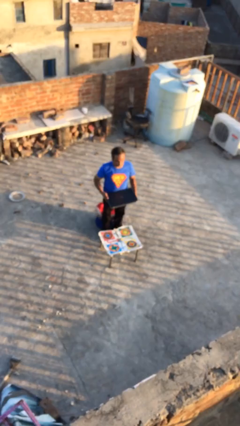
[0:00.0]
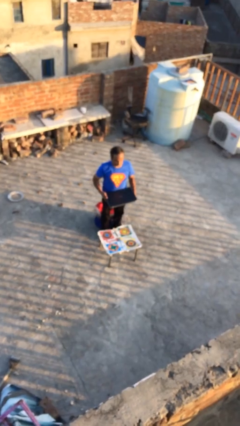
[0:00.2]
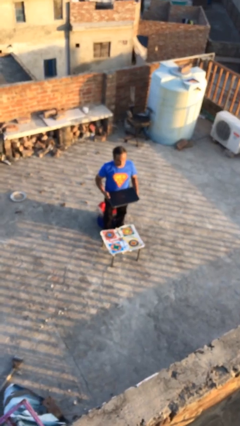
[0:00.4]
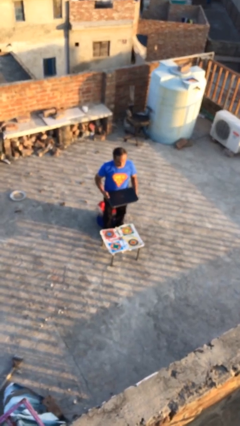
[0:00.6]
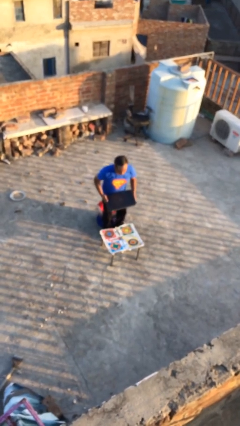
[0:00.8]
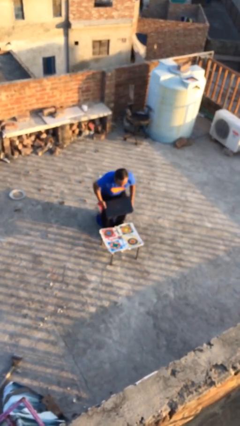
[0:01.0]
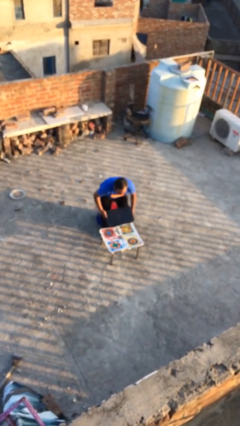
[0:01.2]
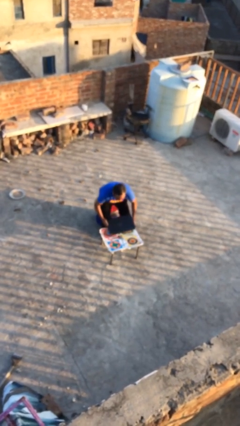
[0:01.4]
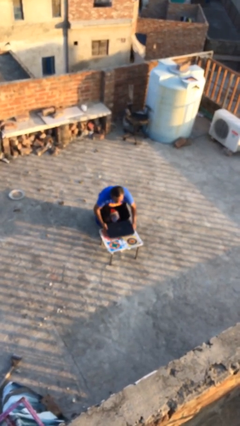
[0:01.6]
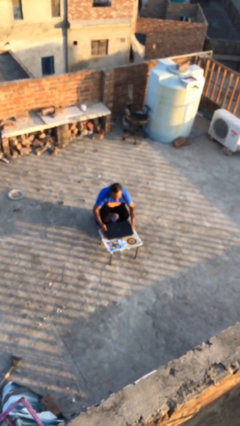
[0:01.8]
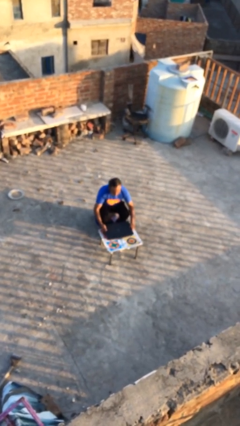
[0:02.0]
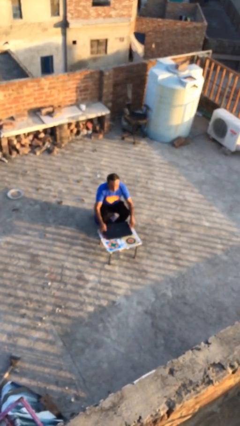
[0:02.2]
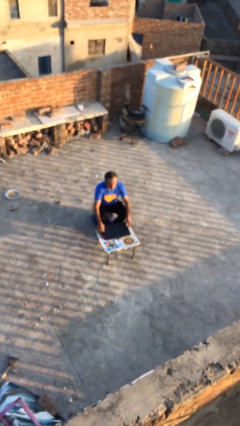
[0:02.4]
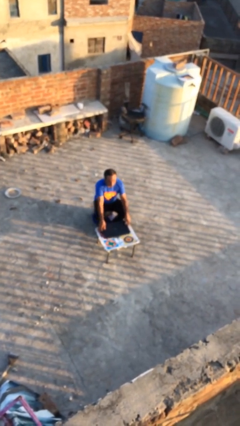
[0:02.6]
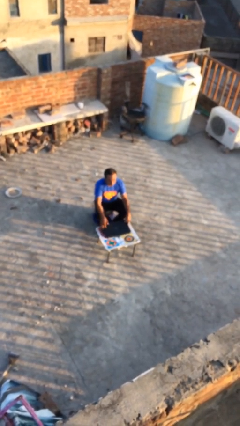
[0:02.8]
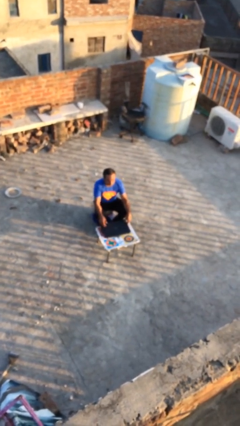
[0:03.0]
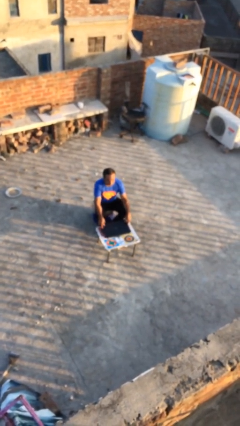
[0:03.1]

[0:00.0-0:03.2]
person sits down

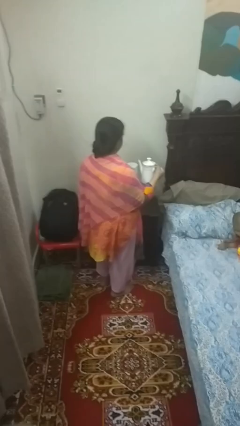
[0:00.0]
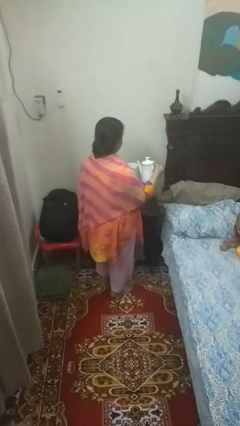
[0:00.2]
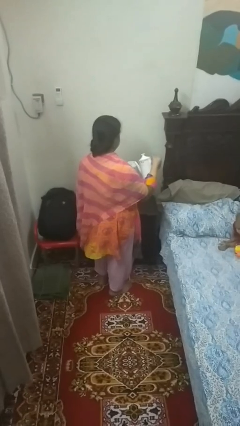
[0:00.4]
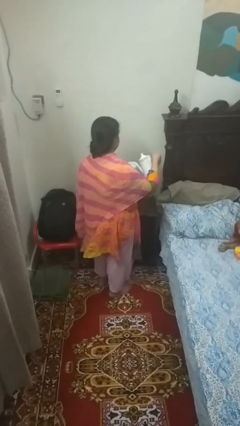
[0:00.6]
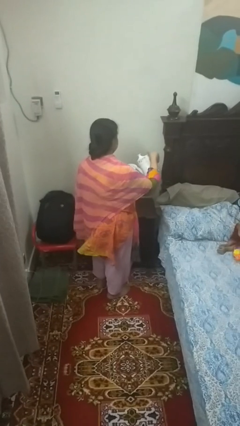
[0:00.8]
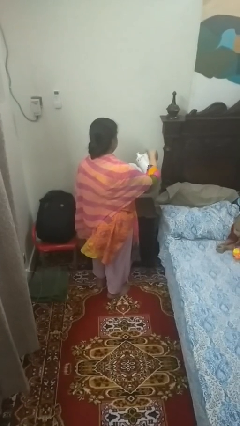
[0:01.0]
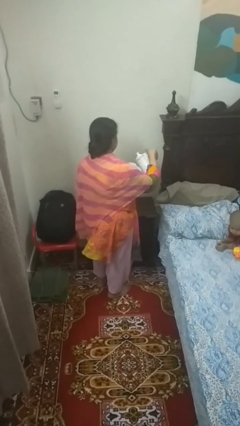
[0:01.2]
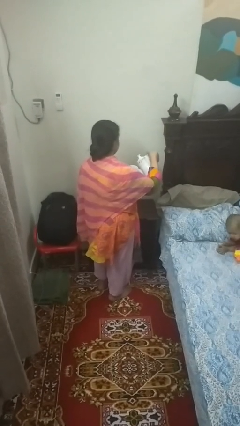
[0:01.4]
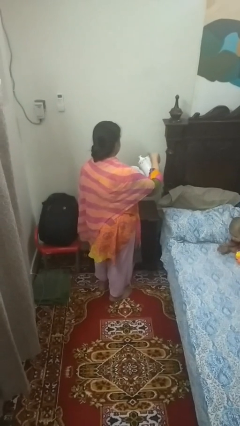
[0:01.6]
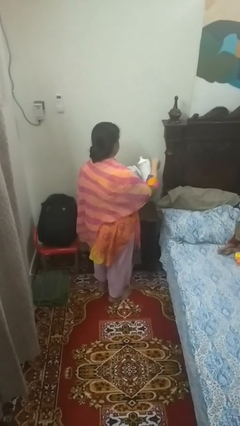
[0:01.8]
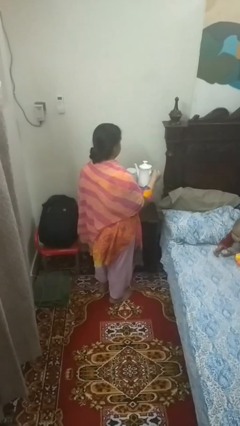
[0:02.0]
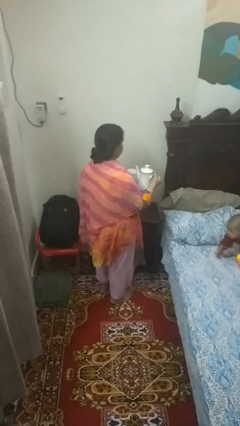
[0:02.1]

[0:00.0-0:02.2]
person pours coffee into mug

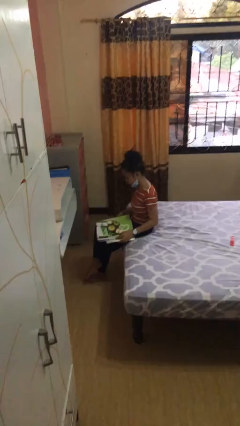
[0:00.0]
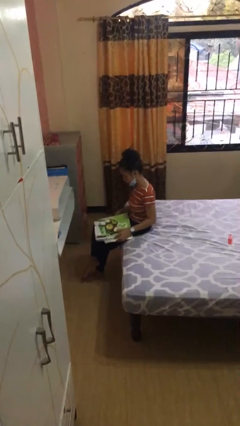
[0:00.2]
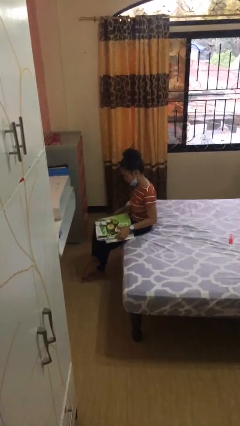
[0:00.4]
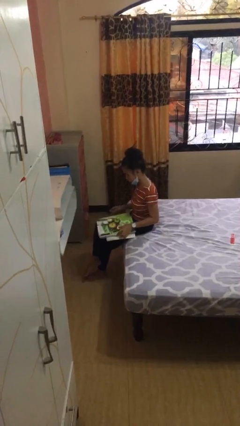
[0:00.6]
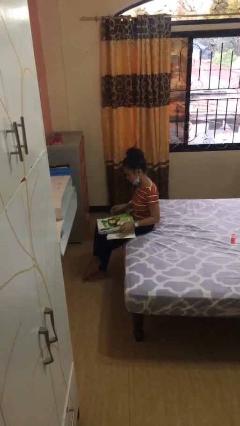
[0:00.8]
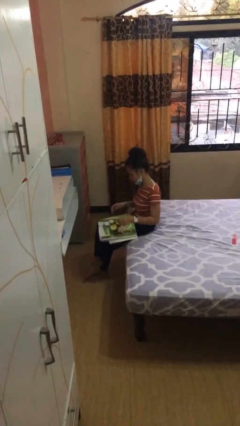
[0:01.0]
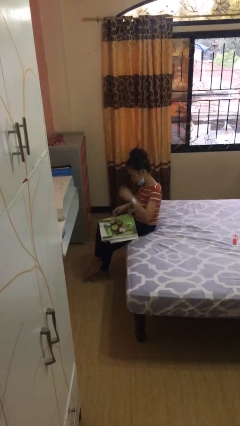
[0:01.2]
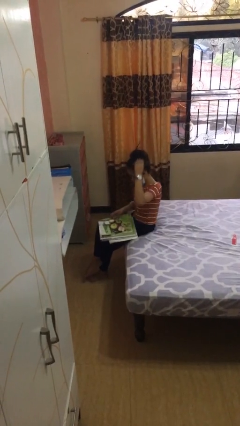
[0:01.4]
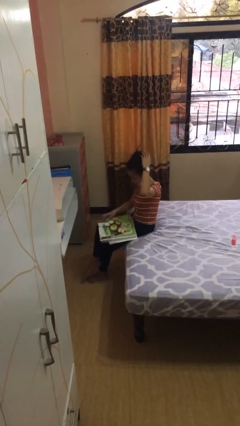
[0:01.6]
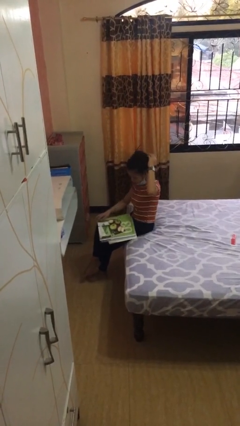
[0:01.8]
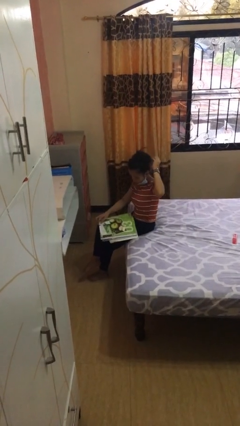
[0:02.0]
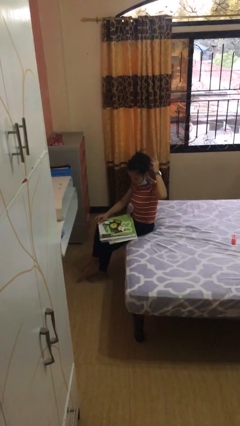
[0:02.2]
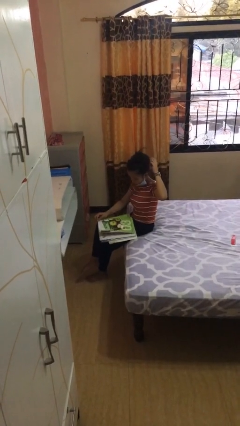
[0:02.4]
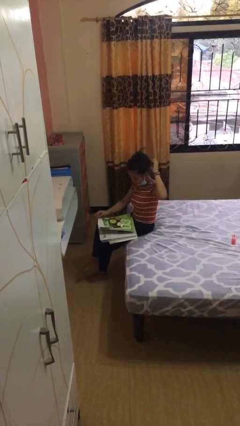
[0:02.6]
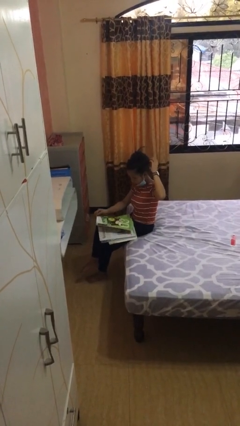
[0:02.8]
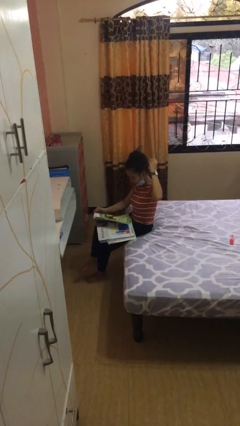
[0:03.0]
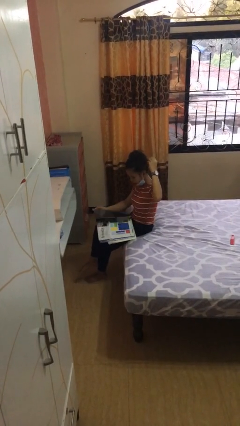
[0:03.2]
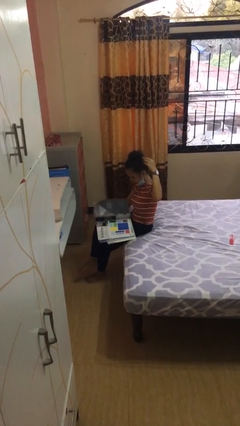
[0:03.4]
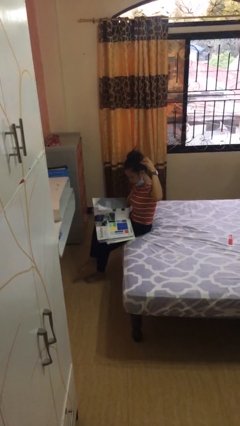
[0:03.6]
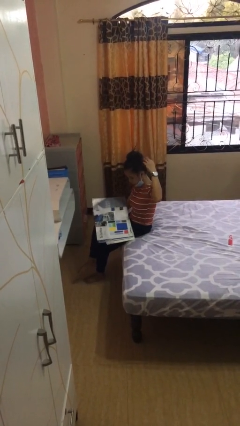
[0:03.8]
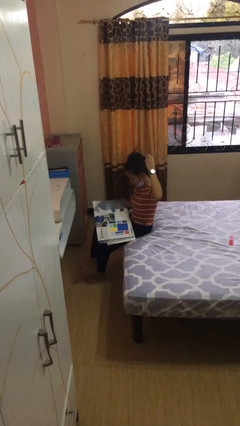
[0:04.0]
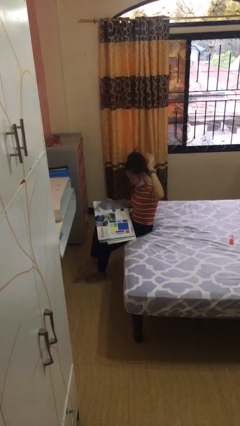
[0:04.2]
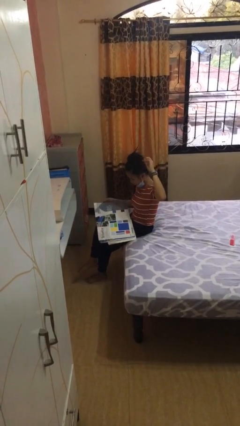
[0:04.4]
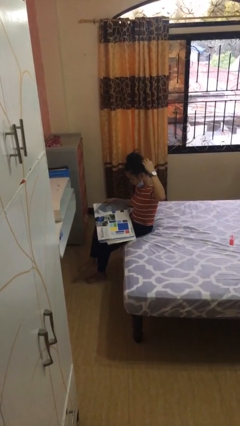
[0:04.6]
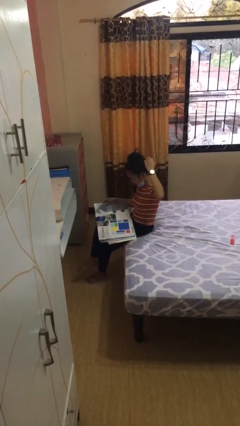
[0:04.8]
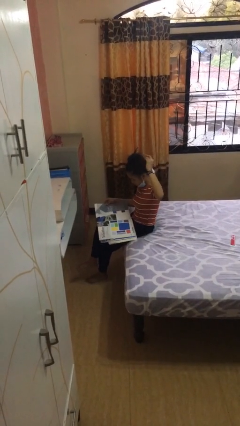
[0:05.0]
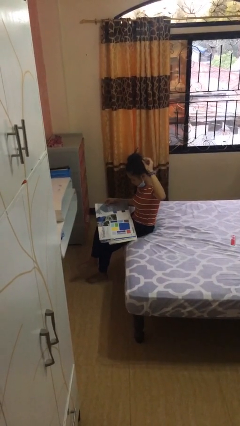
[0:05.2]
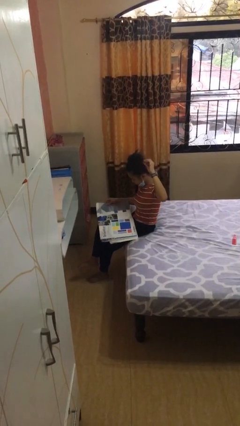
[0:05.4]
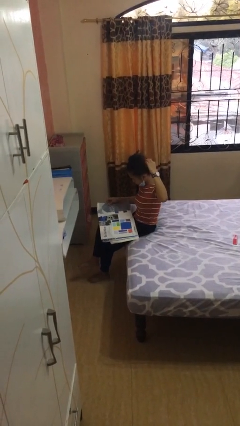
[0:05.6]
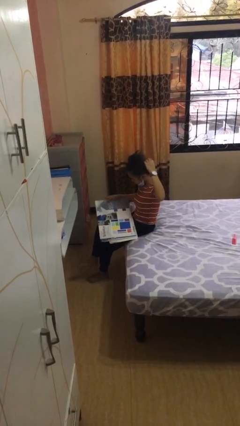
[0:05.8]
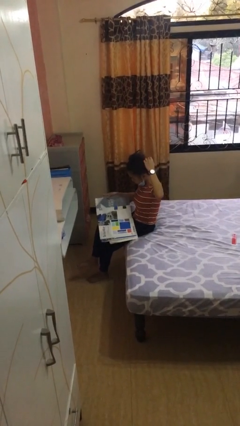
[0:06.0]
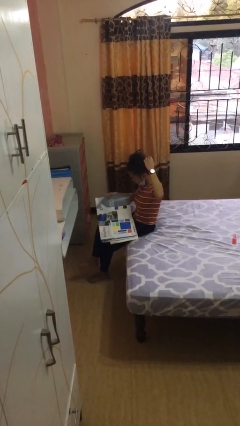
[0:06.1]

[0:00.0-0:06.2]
person reads document

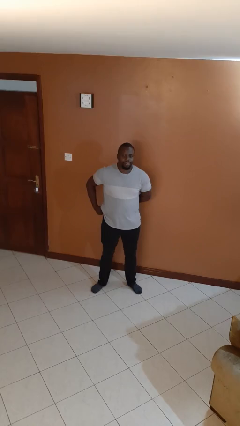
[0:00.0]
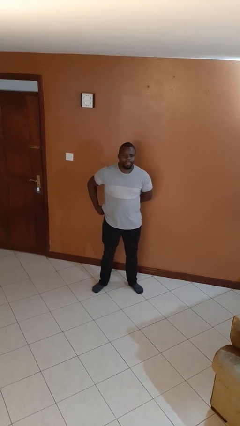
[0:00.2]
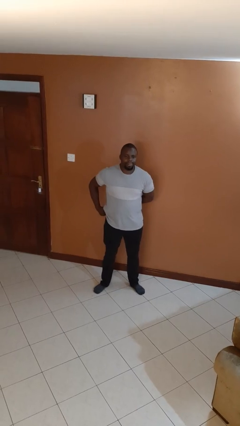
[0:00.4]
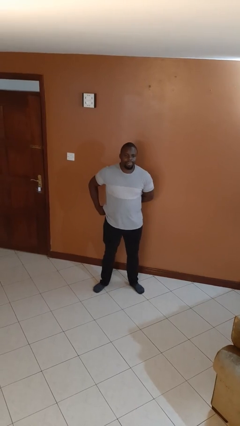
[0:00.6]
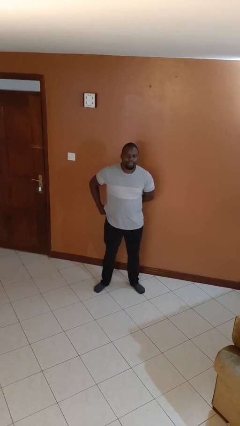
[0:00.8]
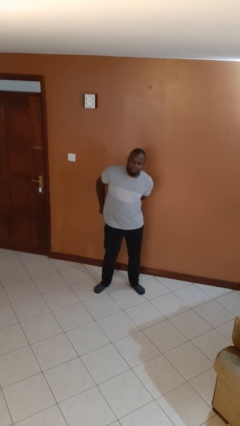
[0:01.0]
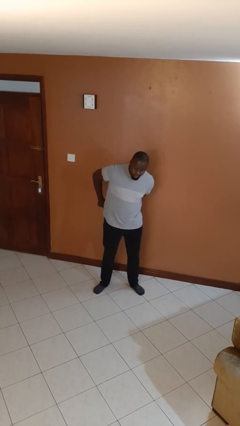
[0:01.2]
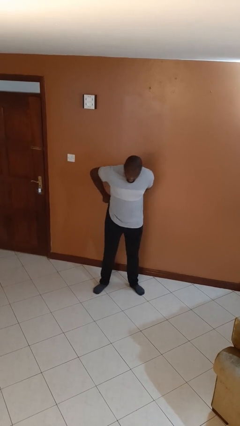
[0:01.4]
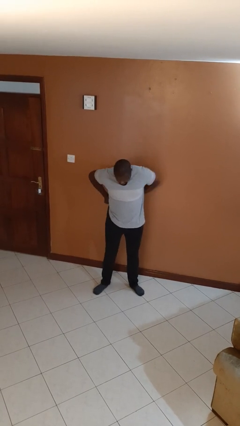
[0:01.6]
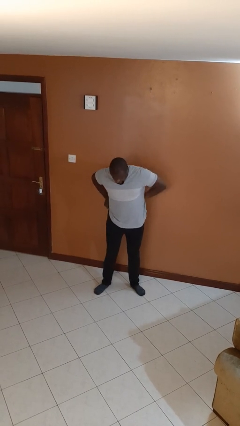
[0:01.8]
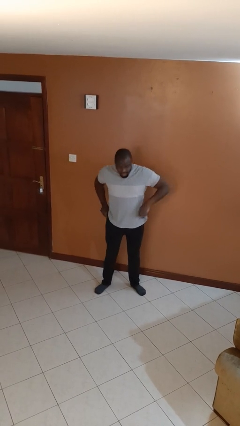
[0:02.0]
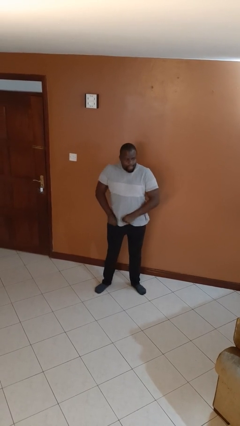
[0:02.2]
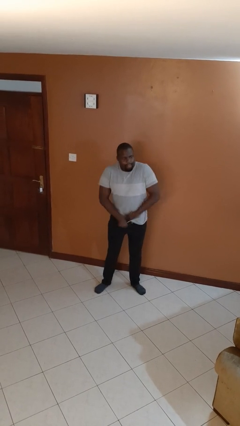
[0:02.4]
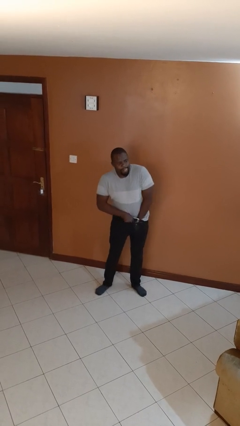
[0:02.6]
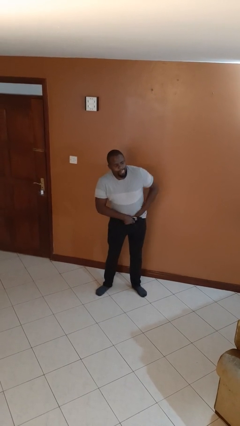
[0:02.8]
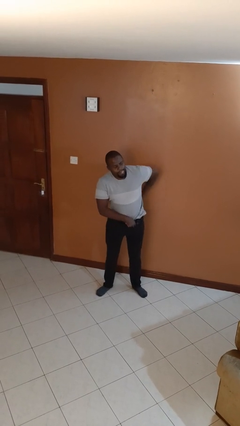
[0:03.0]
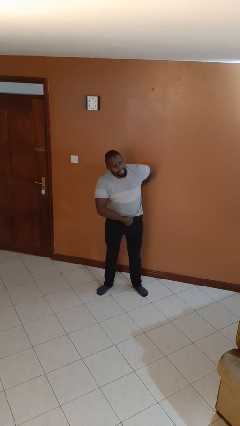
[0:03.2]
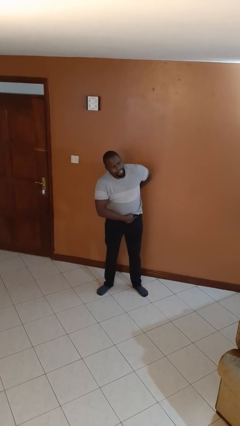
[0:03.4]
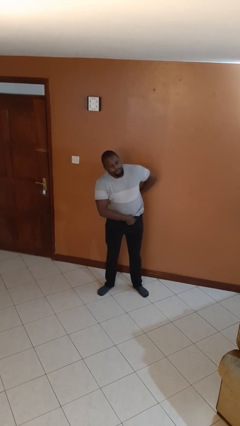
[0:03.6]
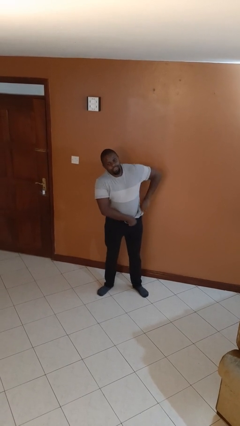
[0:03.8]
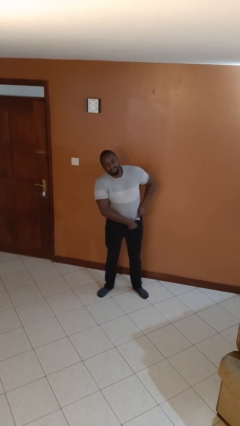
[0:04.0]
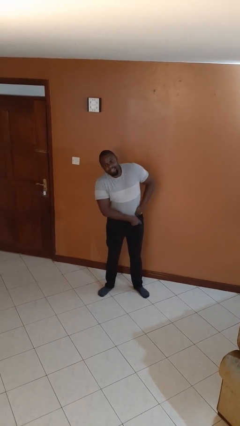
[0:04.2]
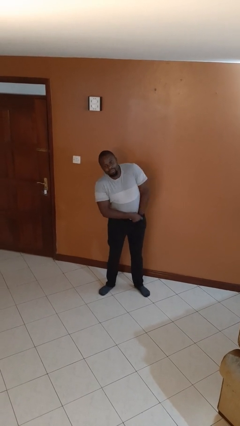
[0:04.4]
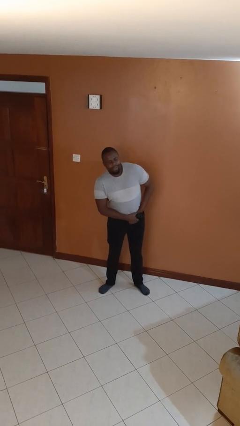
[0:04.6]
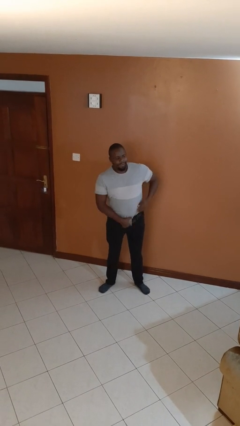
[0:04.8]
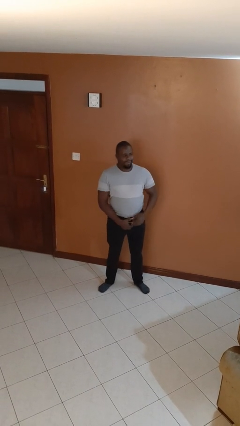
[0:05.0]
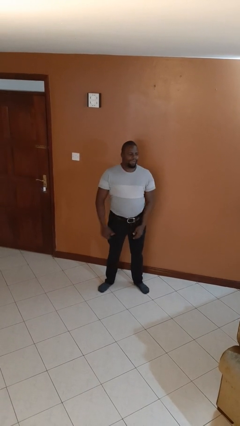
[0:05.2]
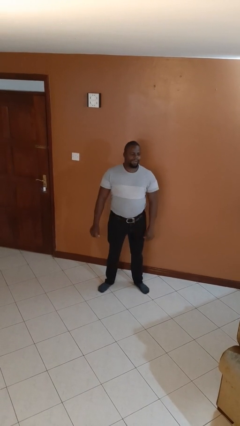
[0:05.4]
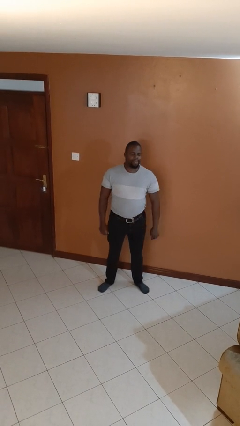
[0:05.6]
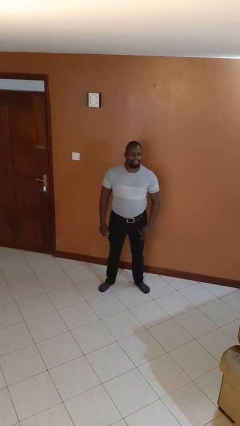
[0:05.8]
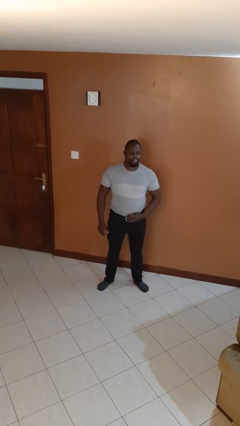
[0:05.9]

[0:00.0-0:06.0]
person tucks in shirt

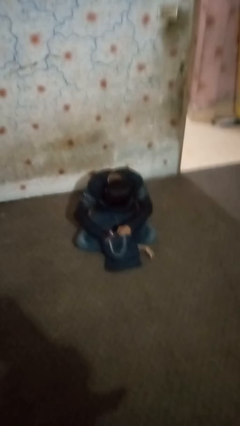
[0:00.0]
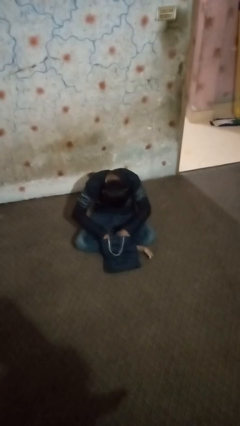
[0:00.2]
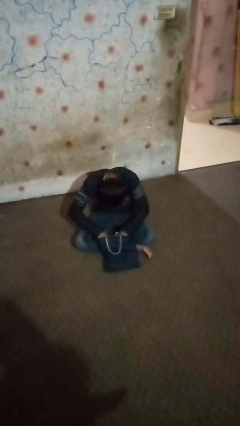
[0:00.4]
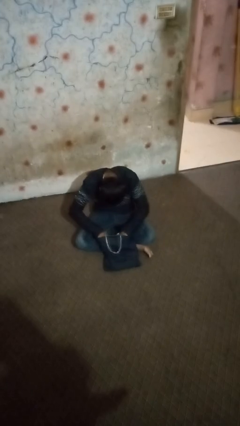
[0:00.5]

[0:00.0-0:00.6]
person searches in bag
